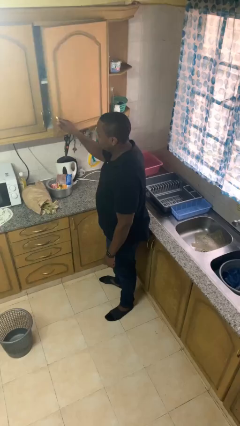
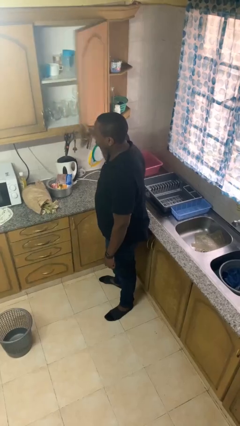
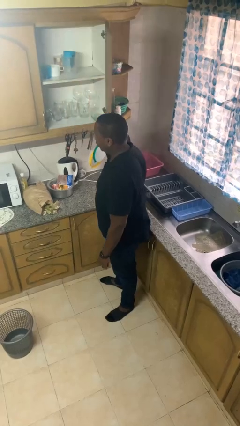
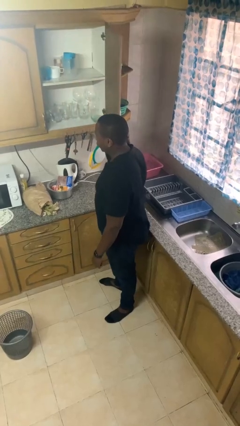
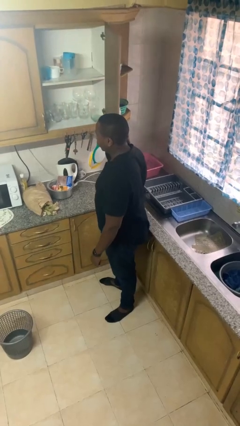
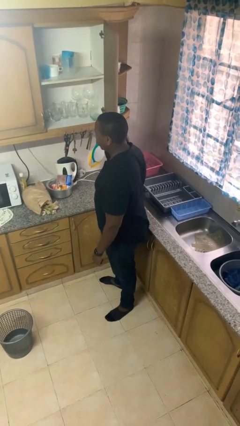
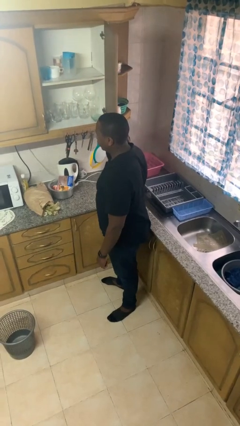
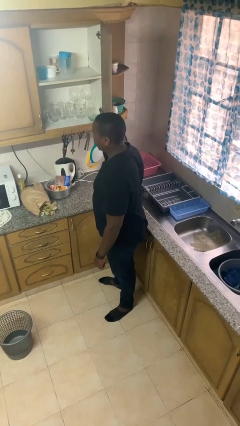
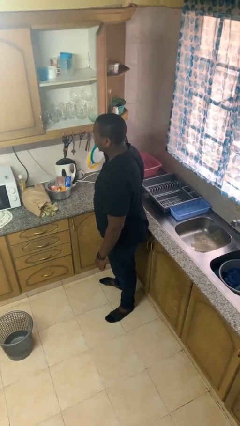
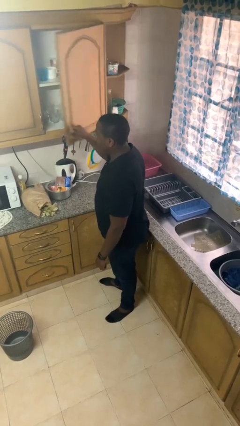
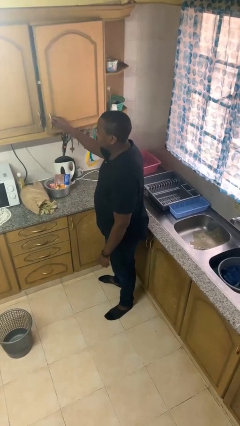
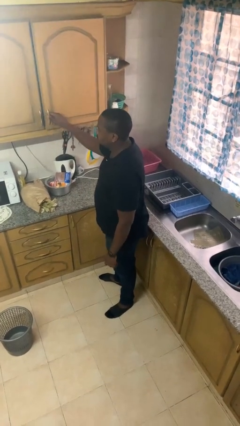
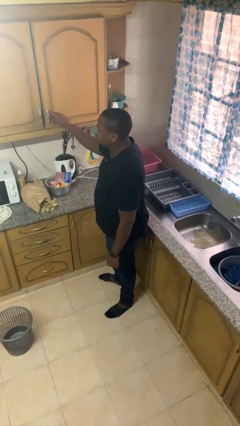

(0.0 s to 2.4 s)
person opens cabinet

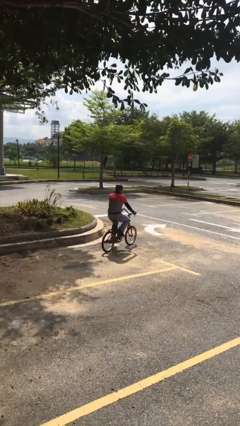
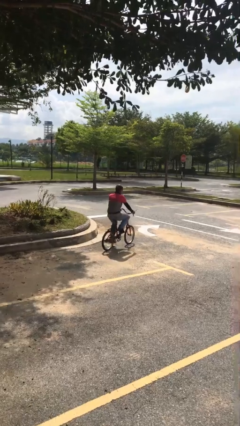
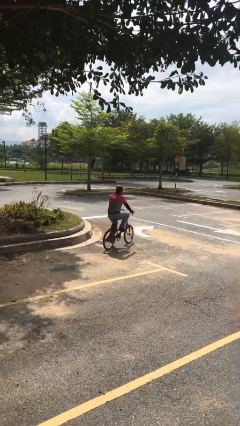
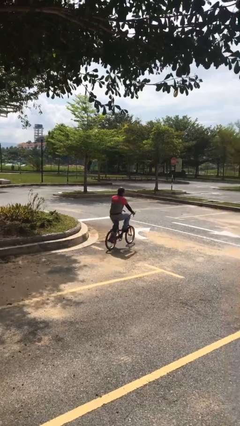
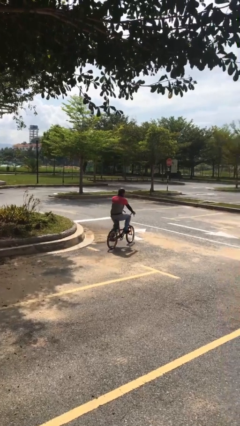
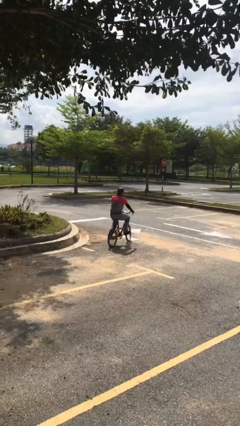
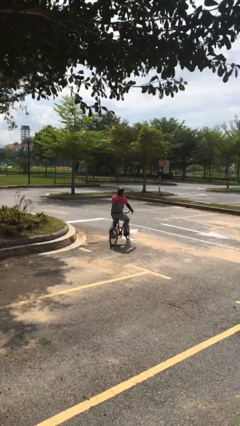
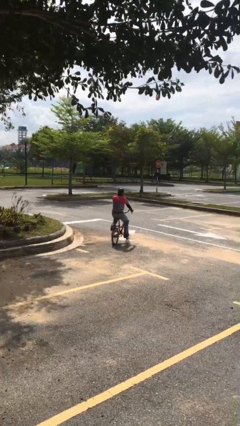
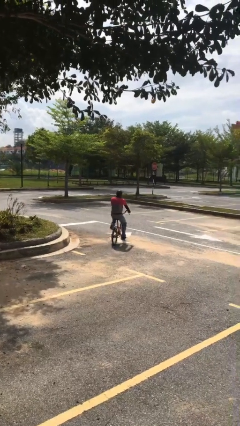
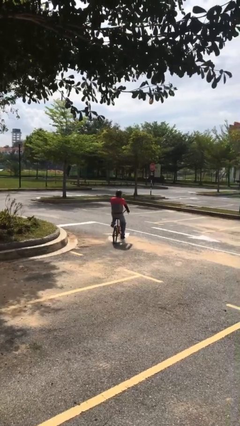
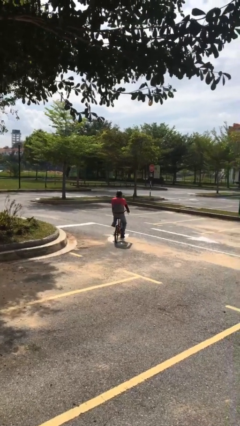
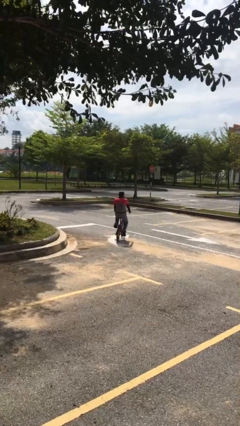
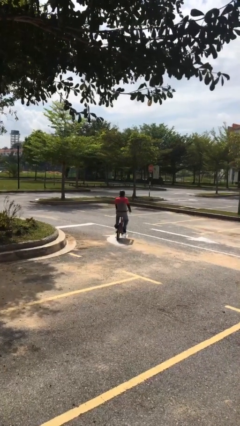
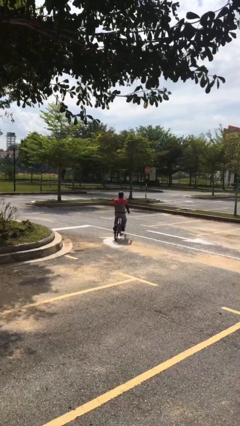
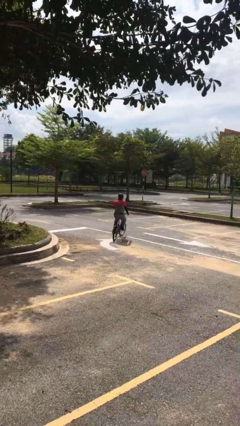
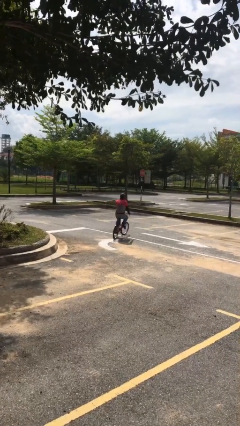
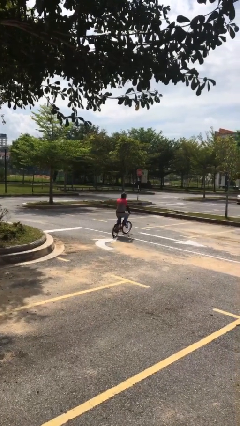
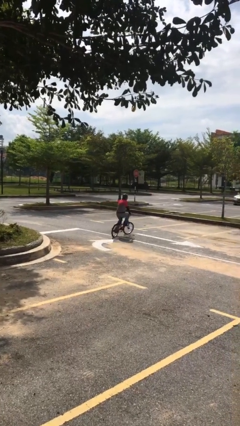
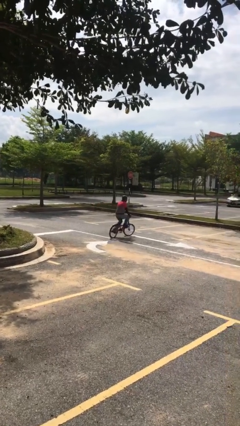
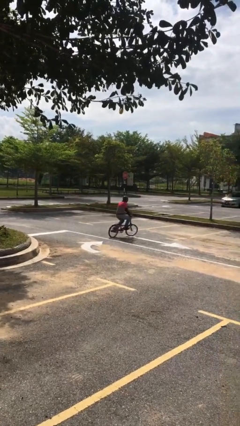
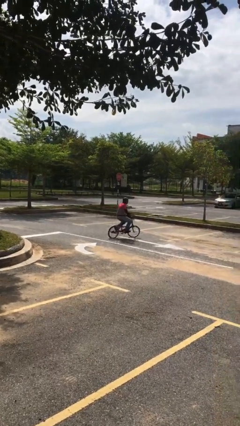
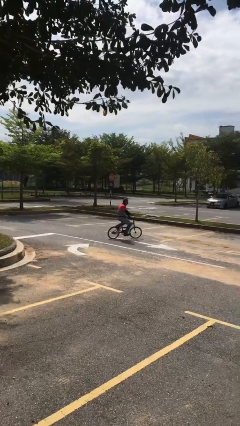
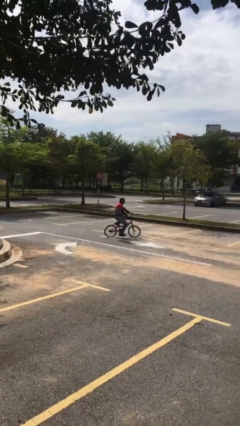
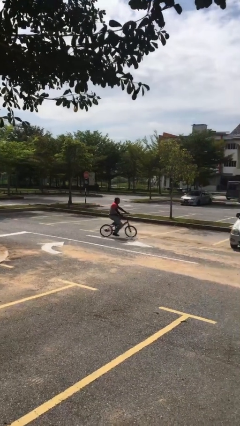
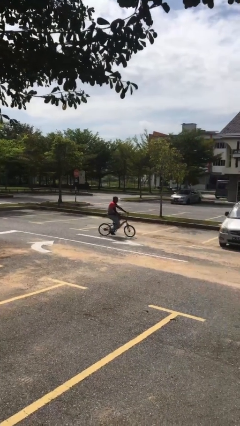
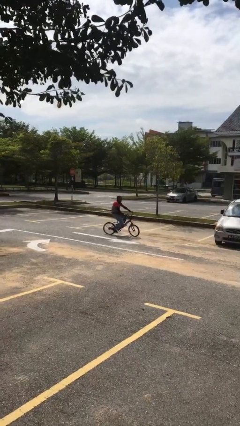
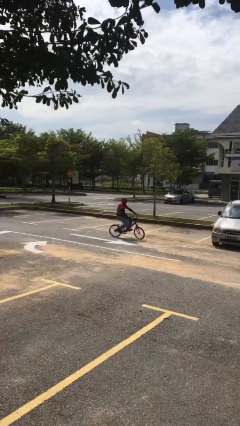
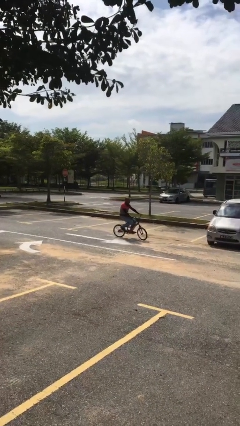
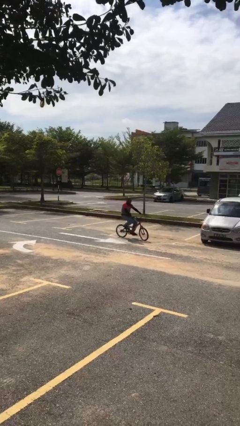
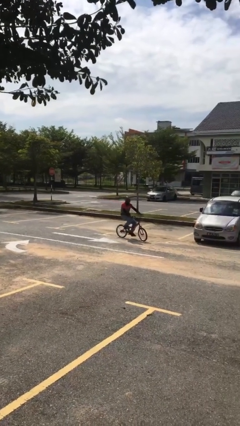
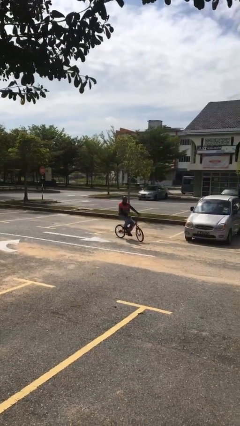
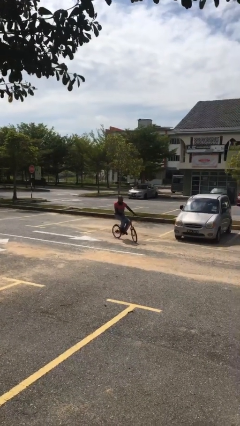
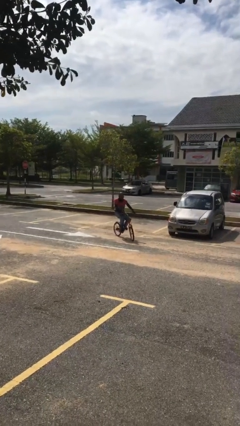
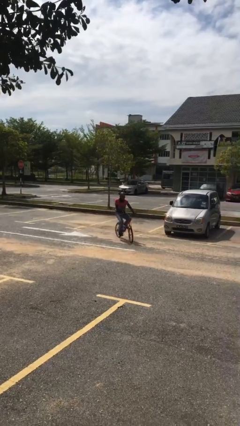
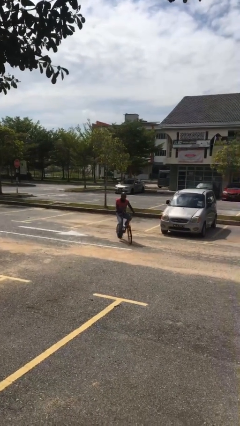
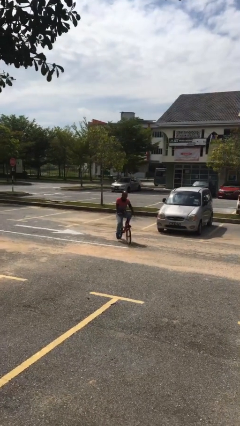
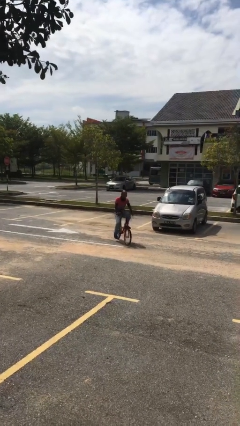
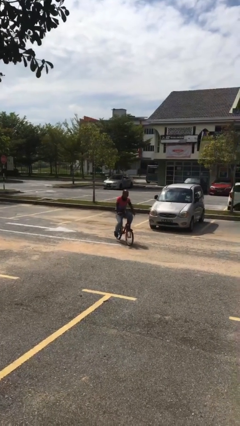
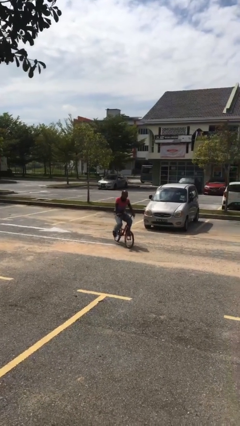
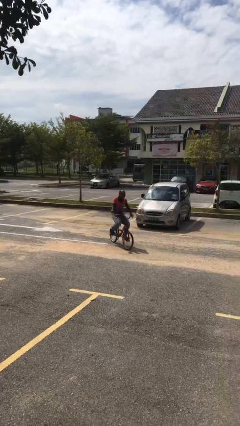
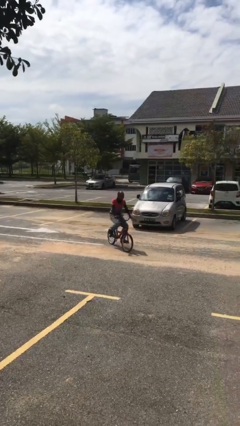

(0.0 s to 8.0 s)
person rides bicycle

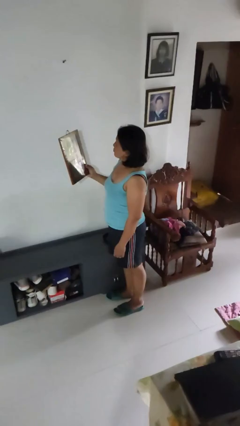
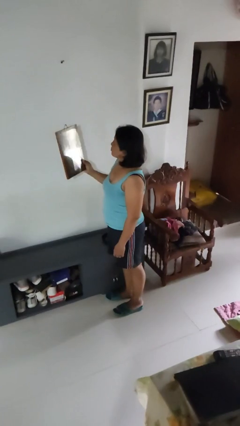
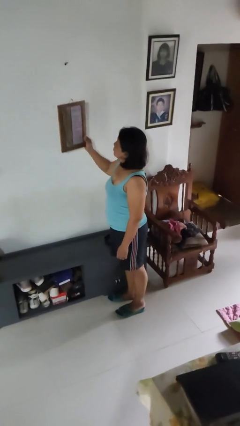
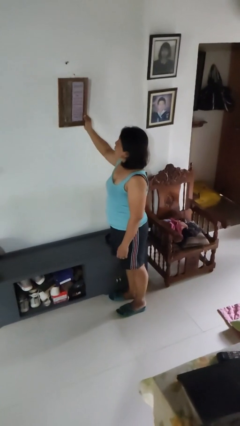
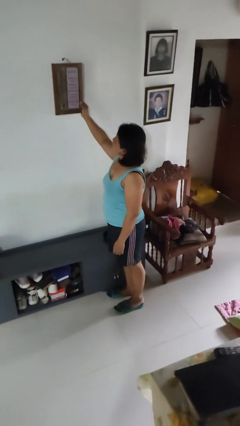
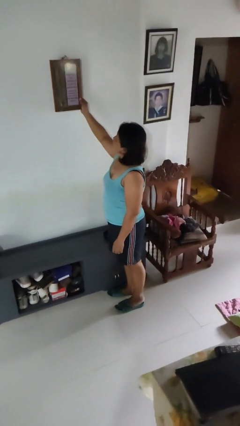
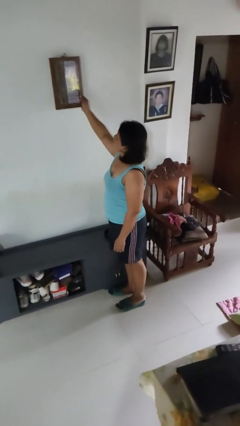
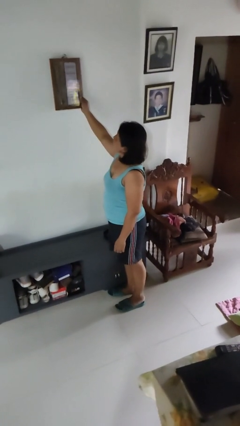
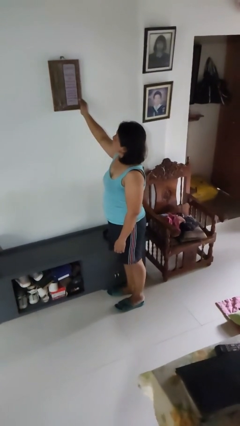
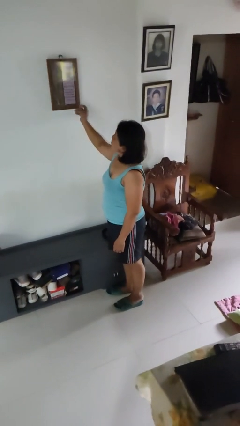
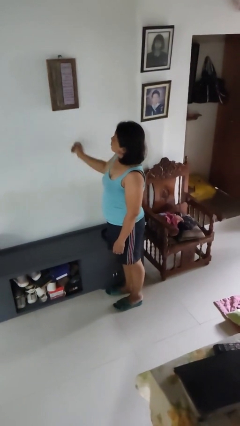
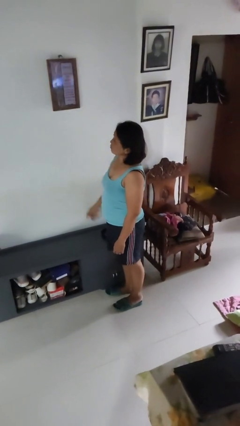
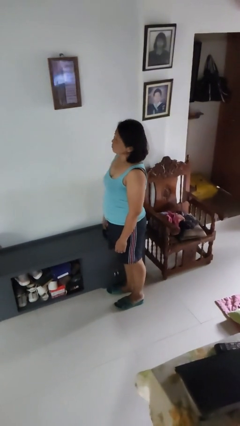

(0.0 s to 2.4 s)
person puts up picture frame

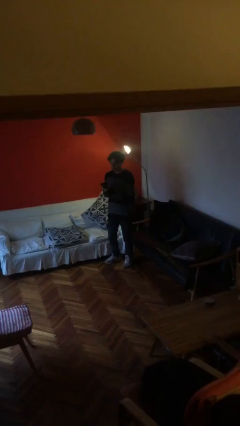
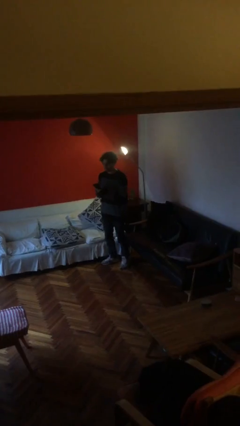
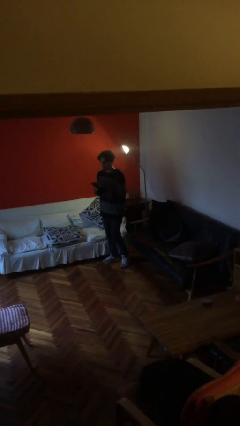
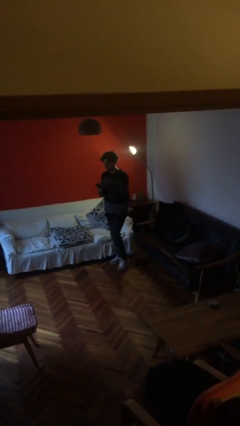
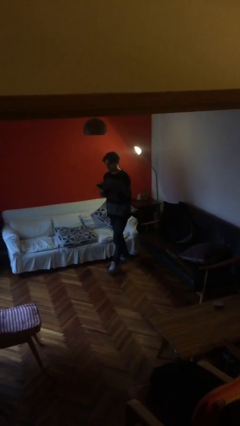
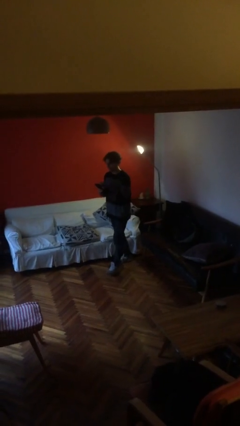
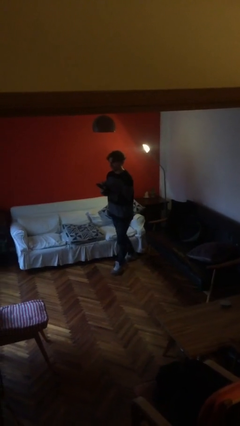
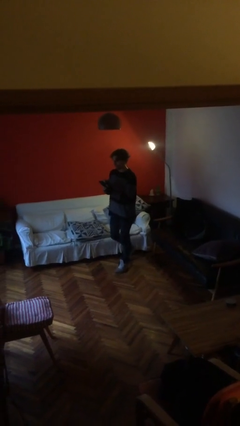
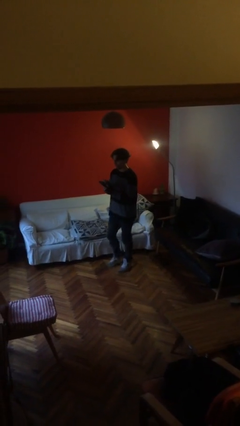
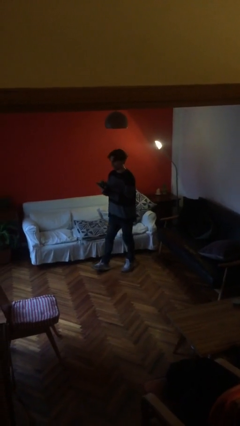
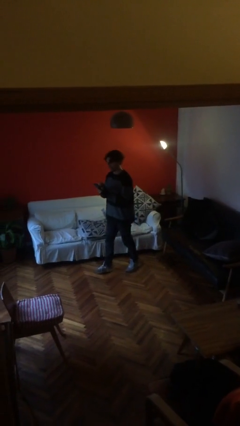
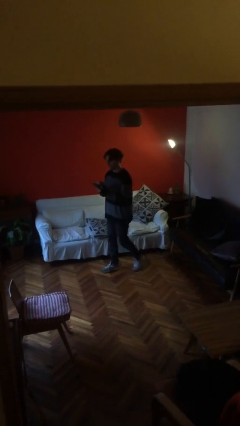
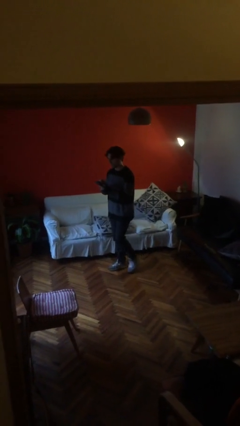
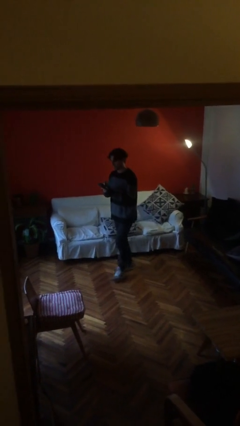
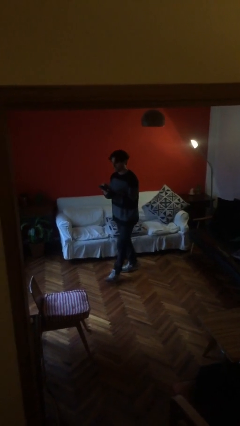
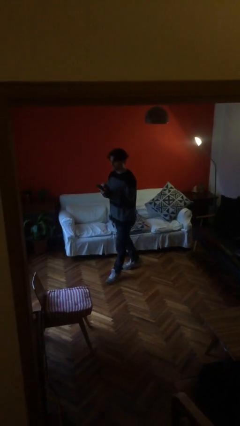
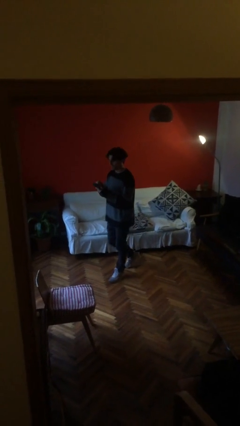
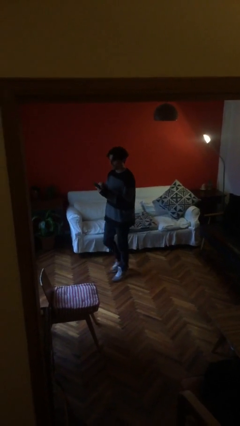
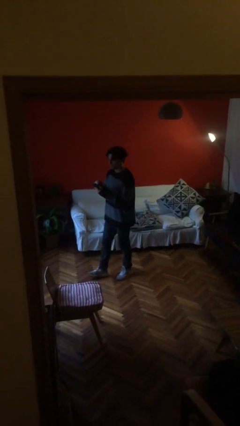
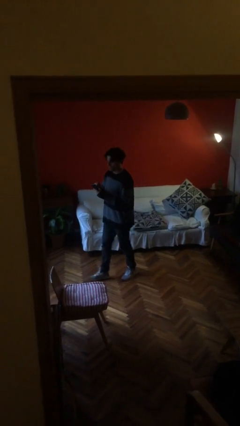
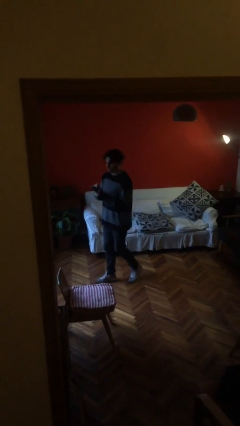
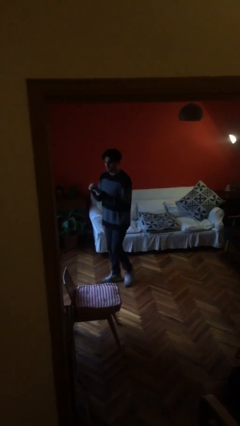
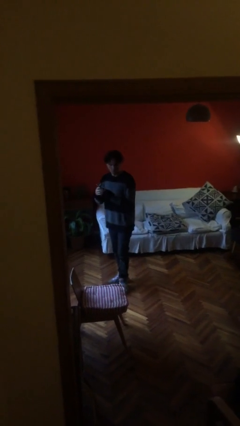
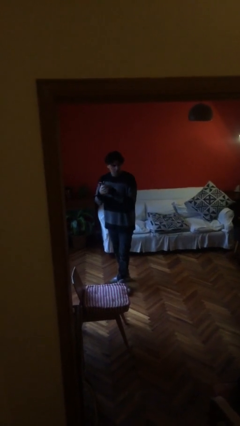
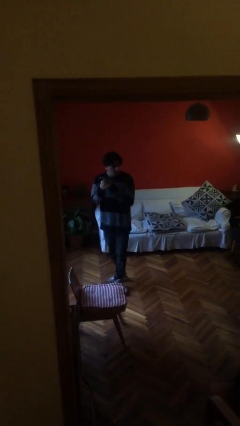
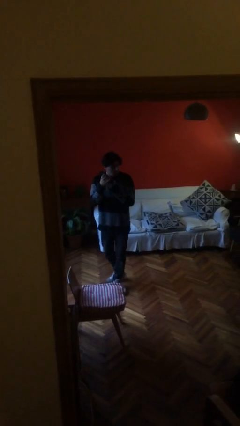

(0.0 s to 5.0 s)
person texts on phone
